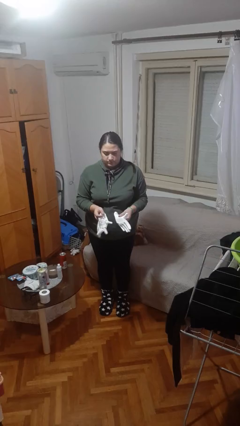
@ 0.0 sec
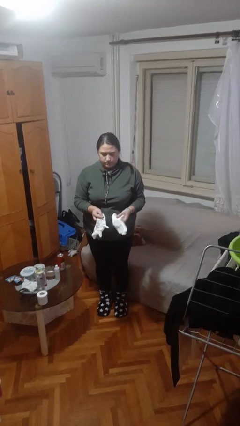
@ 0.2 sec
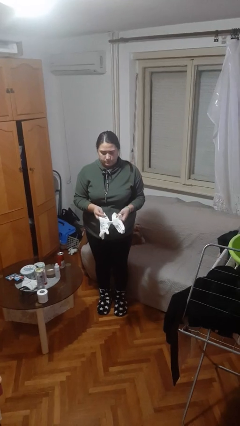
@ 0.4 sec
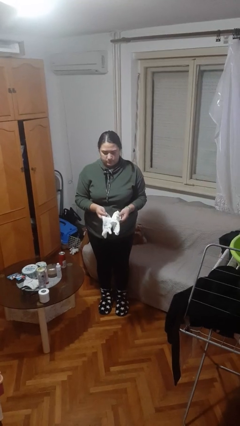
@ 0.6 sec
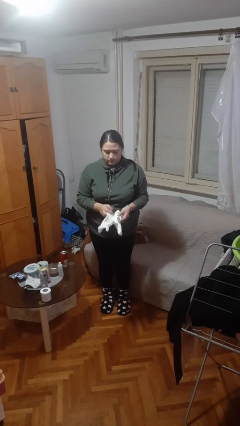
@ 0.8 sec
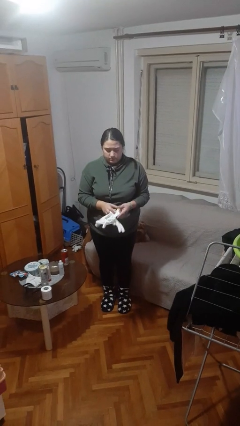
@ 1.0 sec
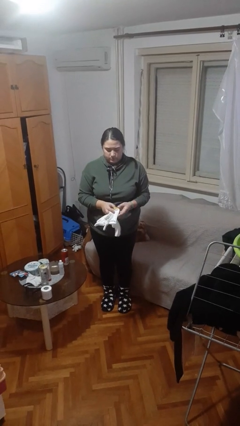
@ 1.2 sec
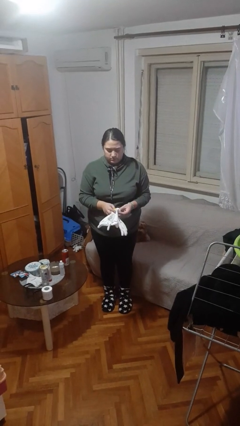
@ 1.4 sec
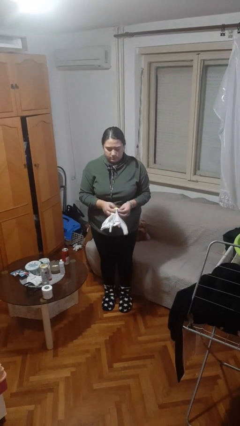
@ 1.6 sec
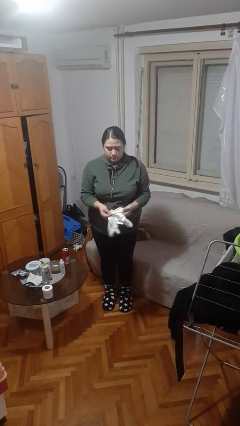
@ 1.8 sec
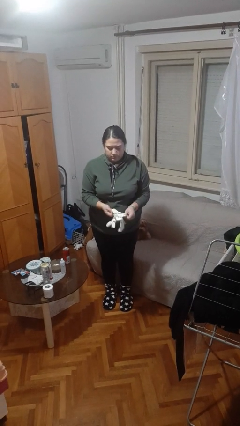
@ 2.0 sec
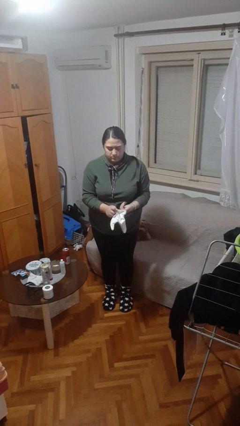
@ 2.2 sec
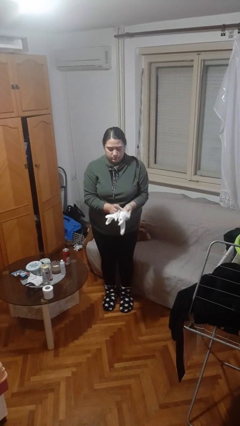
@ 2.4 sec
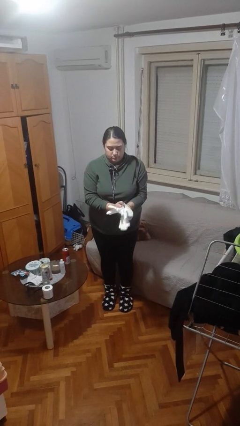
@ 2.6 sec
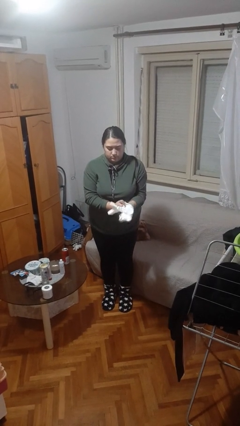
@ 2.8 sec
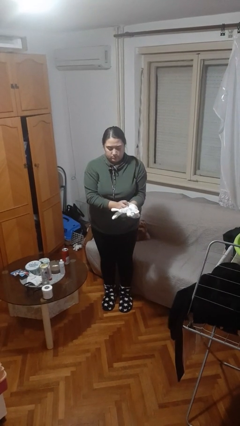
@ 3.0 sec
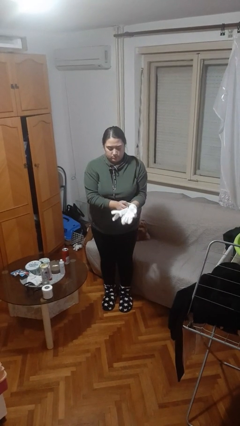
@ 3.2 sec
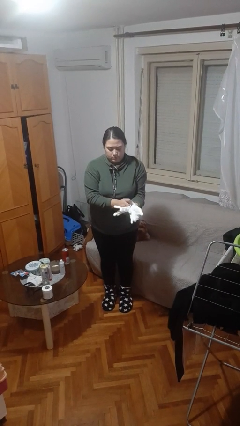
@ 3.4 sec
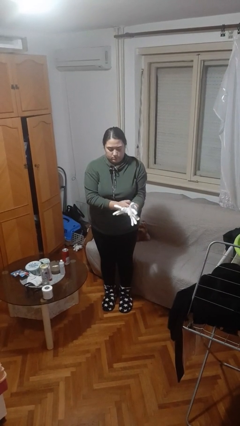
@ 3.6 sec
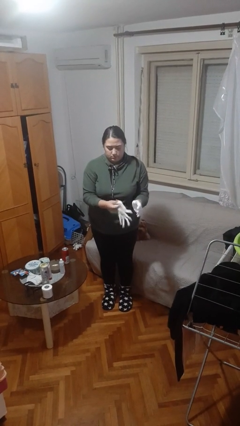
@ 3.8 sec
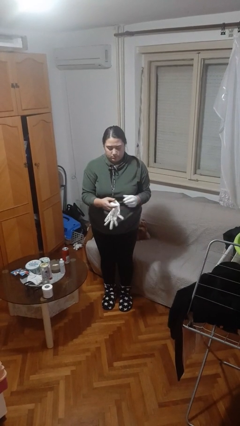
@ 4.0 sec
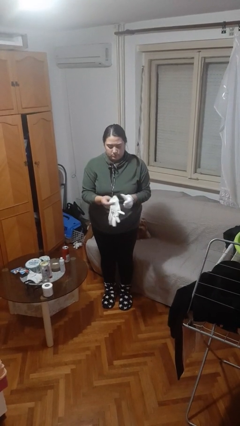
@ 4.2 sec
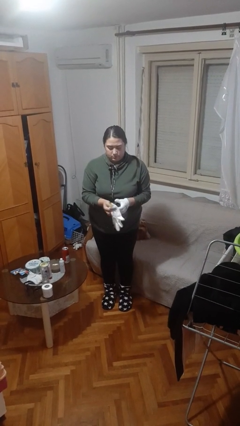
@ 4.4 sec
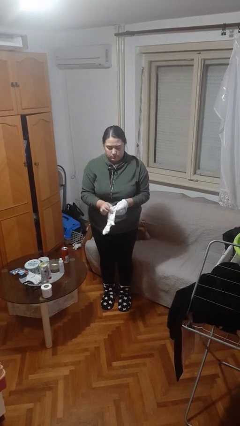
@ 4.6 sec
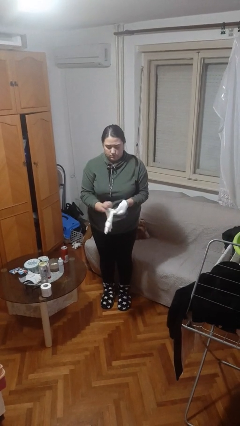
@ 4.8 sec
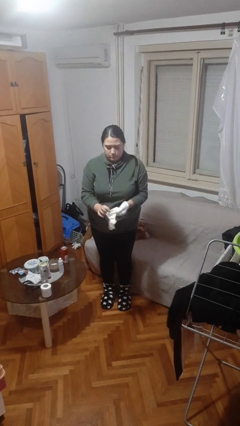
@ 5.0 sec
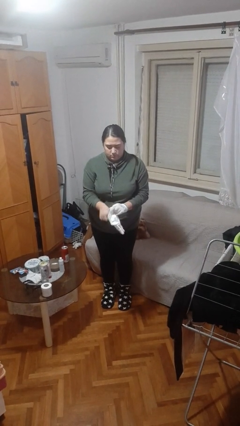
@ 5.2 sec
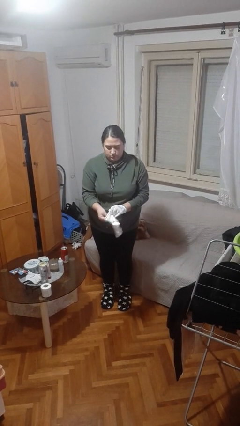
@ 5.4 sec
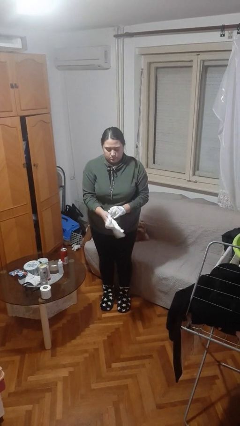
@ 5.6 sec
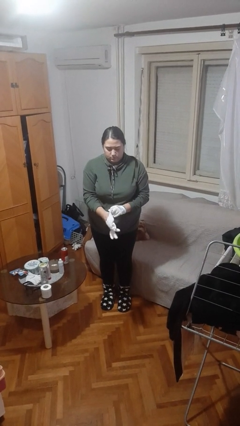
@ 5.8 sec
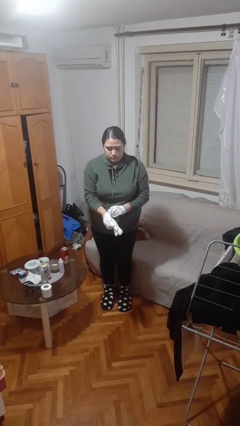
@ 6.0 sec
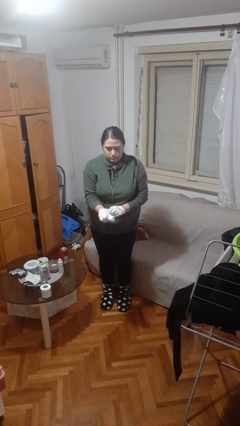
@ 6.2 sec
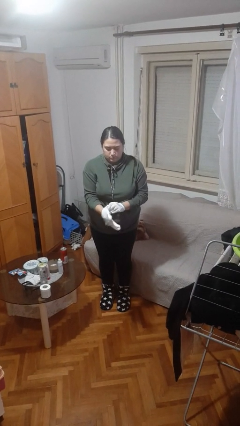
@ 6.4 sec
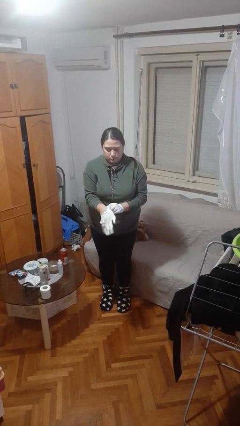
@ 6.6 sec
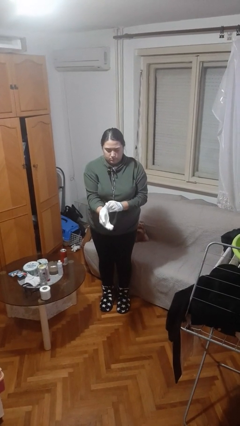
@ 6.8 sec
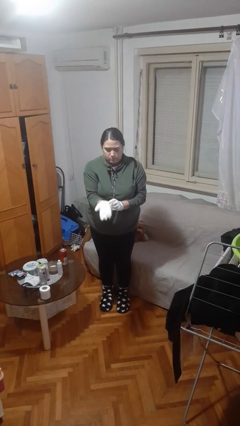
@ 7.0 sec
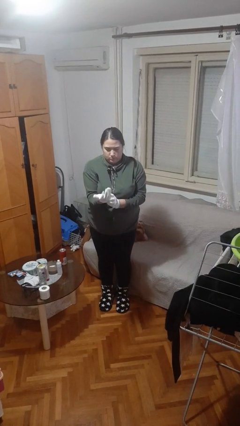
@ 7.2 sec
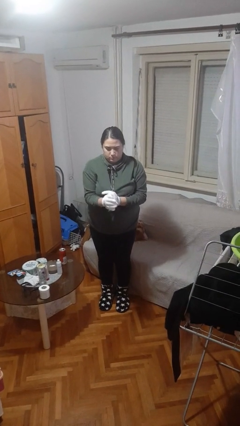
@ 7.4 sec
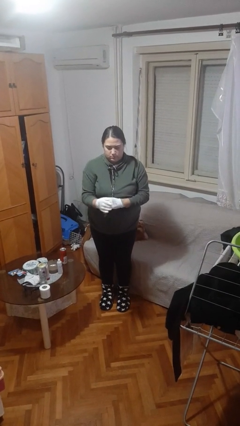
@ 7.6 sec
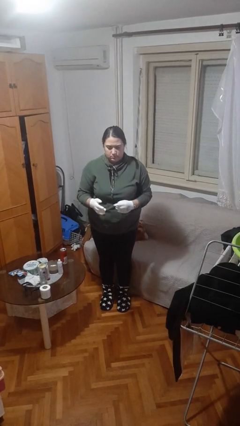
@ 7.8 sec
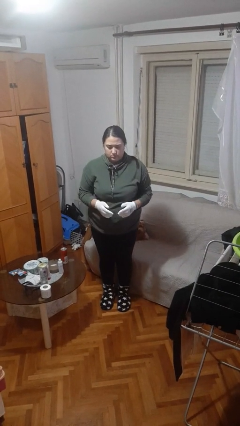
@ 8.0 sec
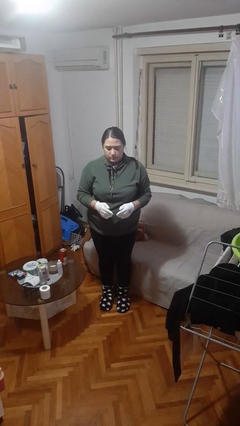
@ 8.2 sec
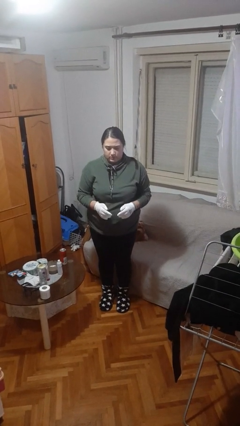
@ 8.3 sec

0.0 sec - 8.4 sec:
person puts on gloves

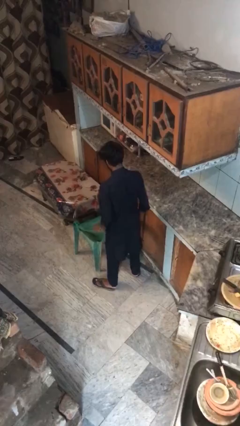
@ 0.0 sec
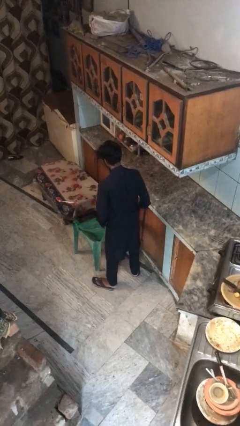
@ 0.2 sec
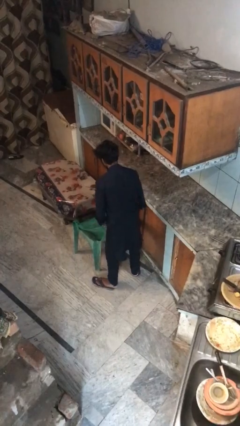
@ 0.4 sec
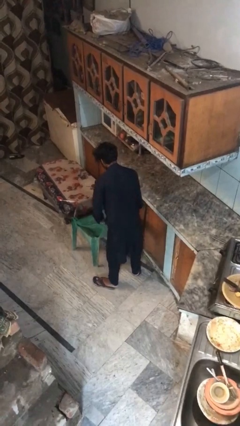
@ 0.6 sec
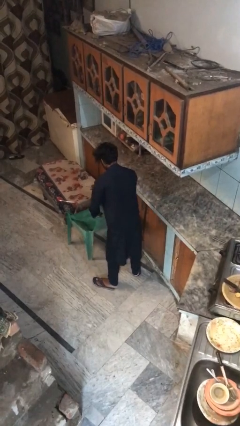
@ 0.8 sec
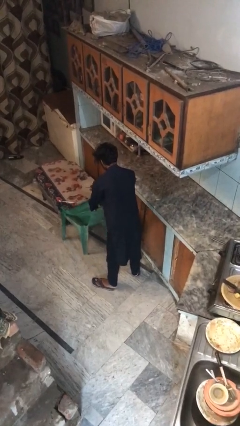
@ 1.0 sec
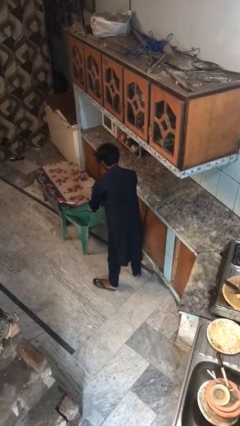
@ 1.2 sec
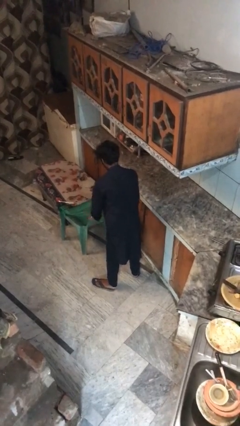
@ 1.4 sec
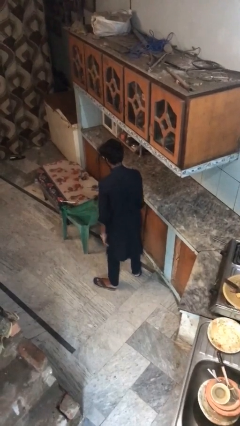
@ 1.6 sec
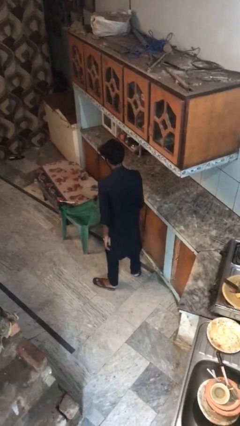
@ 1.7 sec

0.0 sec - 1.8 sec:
person pushes in chair

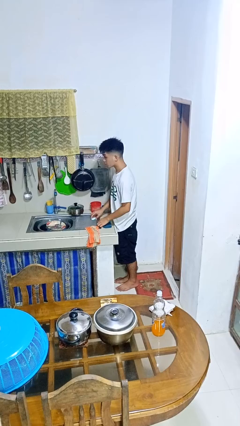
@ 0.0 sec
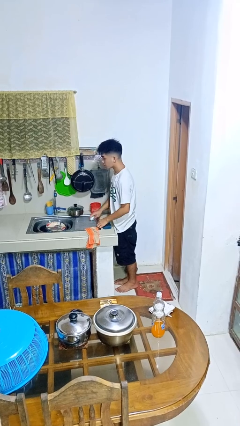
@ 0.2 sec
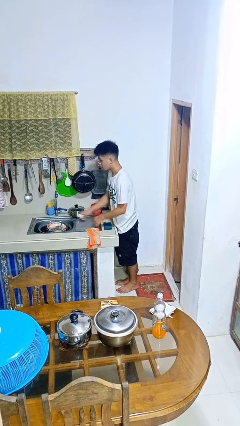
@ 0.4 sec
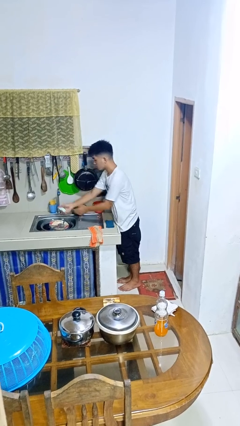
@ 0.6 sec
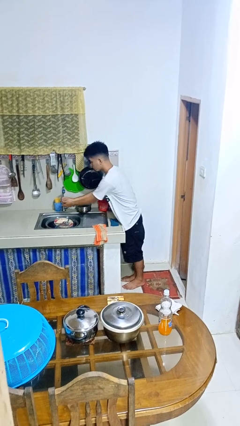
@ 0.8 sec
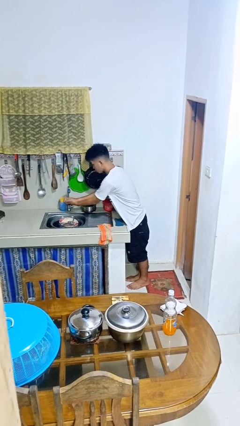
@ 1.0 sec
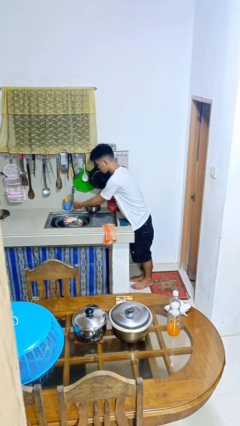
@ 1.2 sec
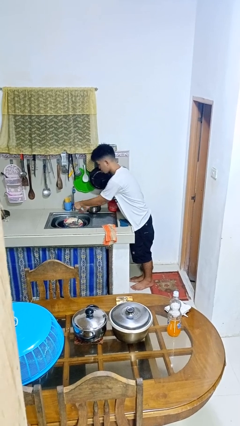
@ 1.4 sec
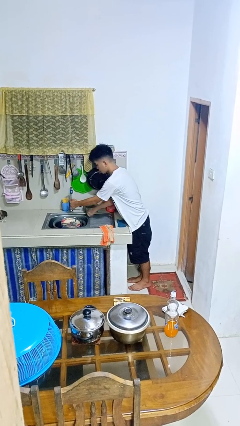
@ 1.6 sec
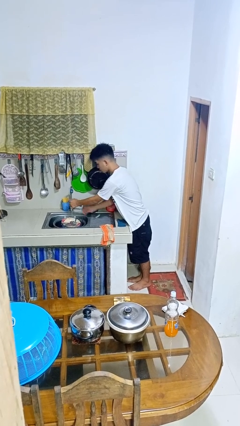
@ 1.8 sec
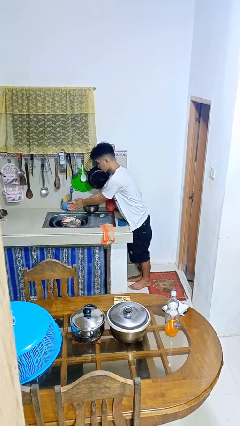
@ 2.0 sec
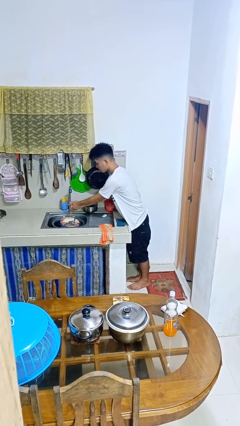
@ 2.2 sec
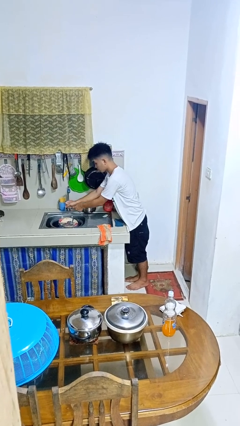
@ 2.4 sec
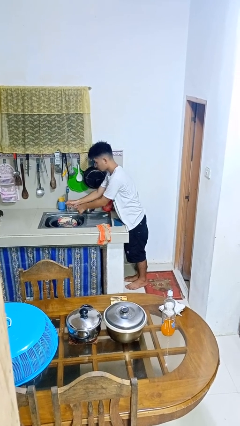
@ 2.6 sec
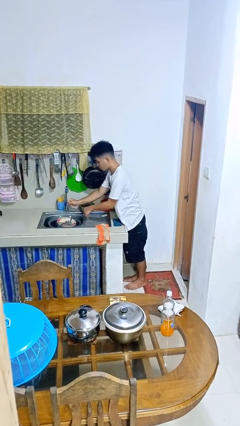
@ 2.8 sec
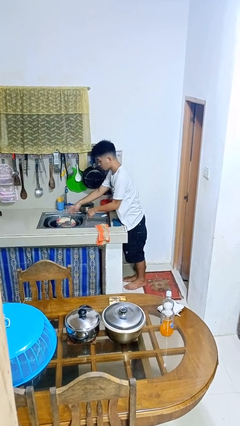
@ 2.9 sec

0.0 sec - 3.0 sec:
person washes hands

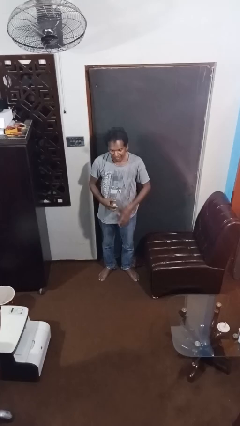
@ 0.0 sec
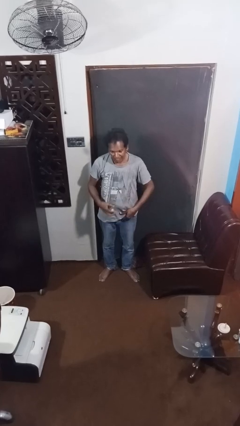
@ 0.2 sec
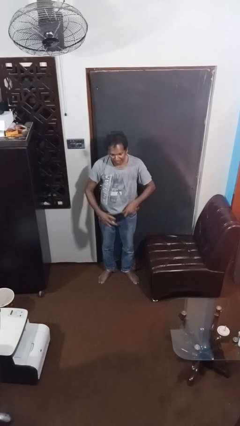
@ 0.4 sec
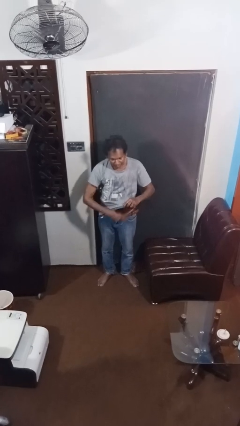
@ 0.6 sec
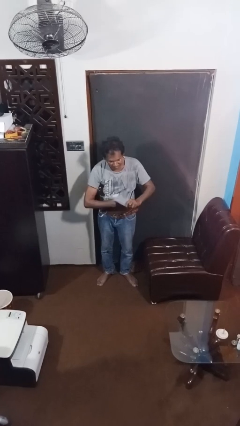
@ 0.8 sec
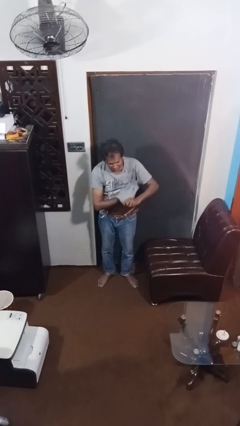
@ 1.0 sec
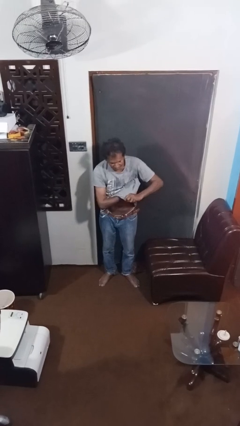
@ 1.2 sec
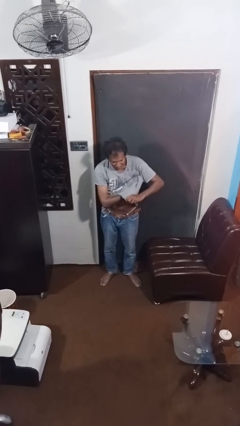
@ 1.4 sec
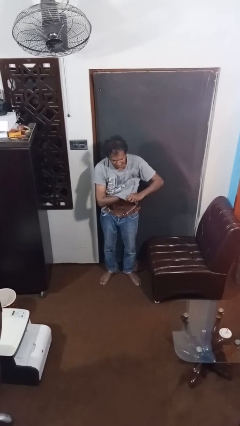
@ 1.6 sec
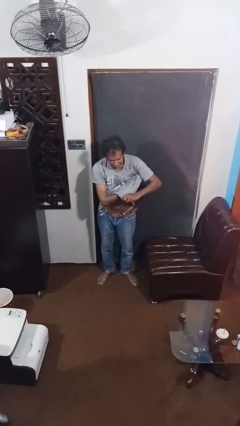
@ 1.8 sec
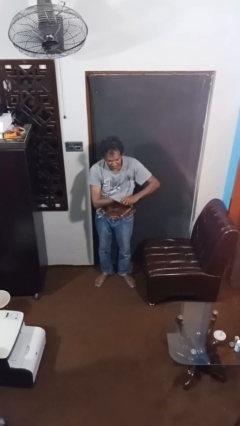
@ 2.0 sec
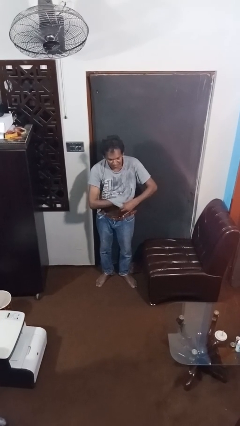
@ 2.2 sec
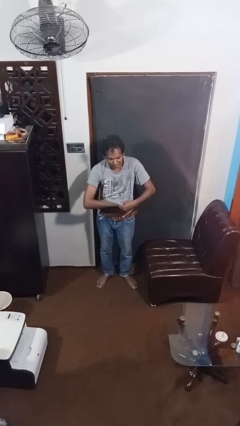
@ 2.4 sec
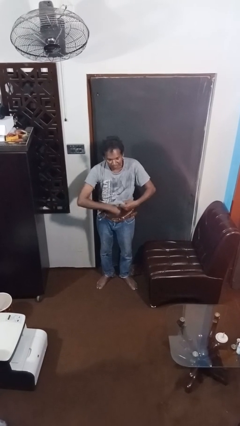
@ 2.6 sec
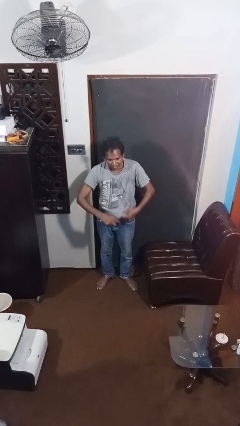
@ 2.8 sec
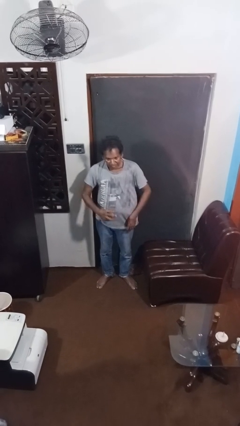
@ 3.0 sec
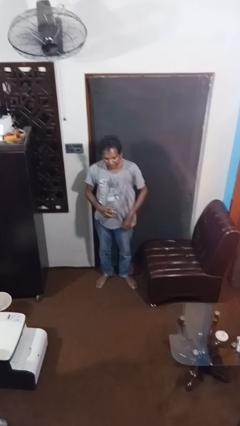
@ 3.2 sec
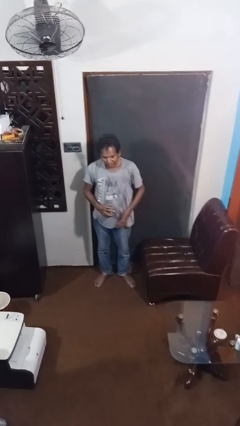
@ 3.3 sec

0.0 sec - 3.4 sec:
person applies deodorant

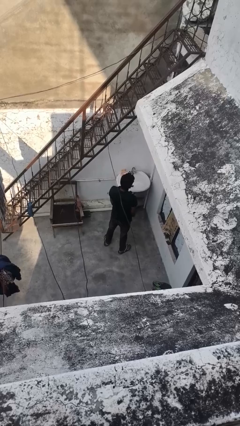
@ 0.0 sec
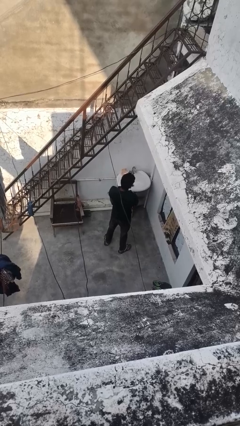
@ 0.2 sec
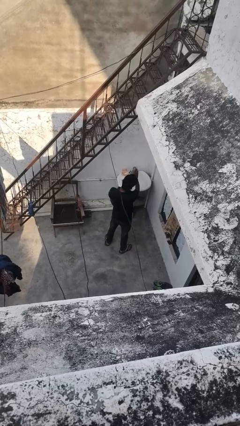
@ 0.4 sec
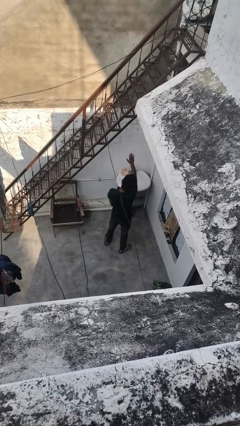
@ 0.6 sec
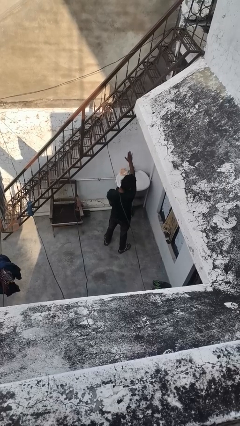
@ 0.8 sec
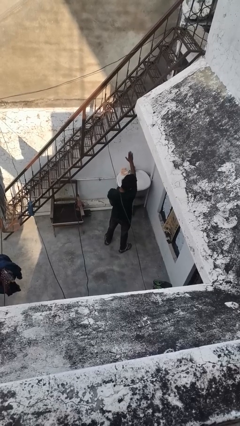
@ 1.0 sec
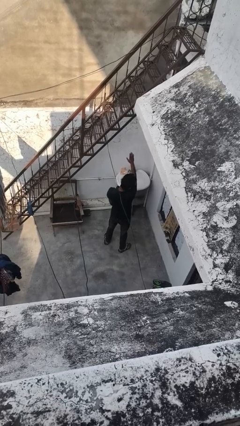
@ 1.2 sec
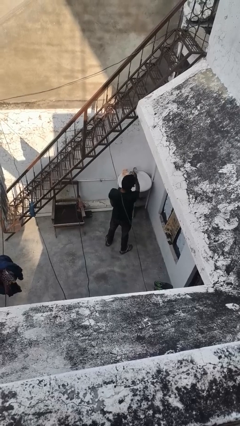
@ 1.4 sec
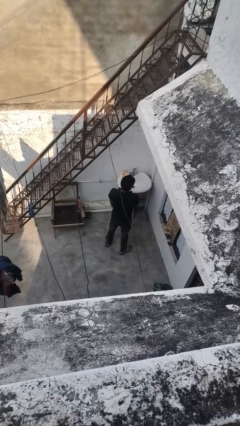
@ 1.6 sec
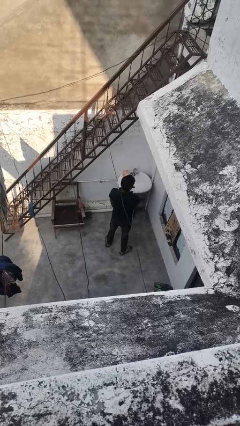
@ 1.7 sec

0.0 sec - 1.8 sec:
person gestures stop
